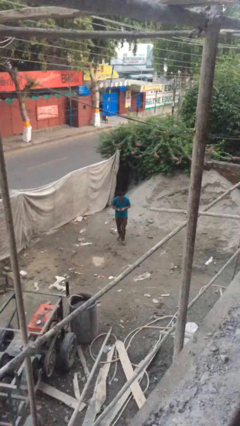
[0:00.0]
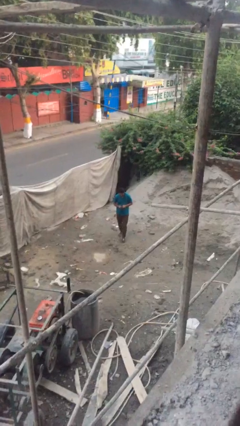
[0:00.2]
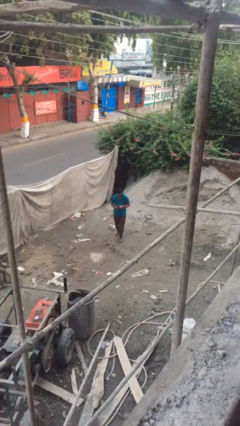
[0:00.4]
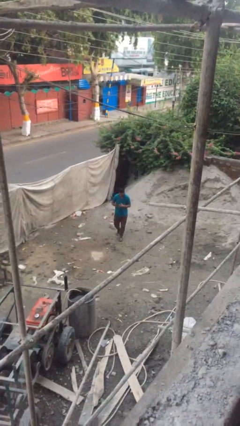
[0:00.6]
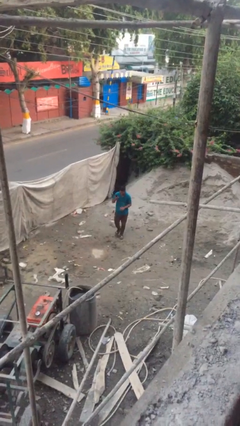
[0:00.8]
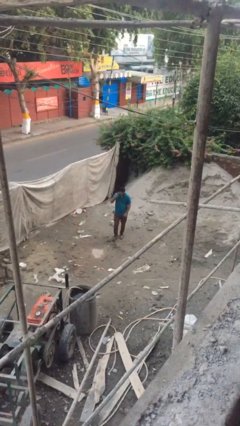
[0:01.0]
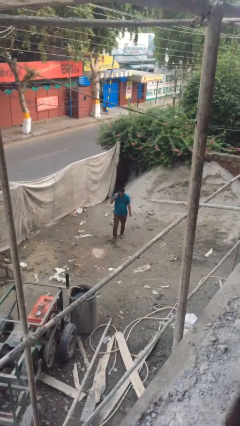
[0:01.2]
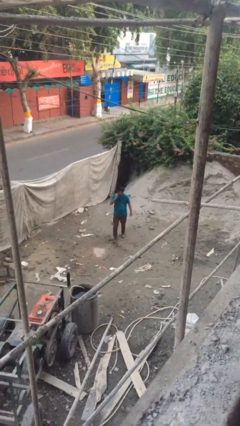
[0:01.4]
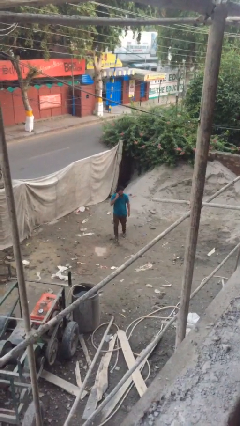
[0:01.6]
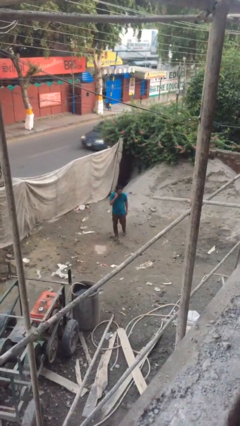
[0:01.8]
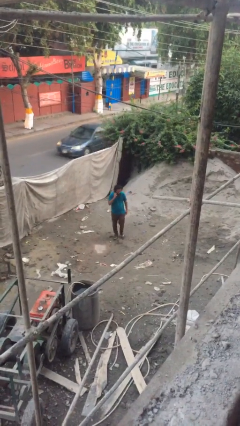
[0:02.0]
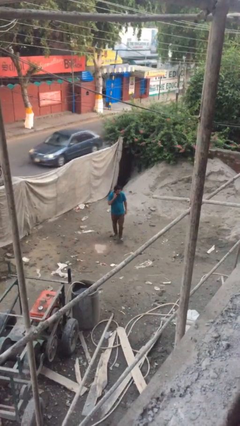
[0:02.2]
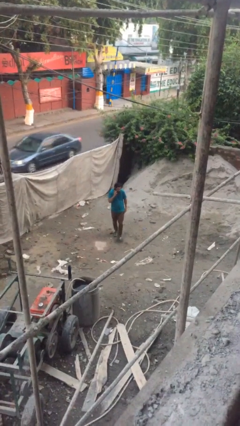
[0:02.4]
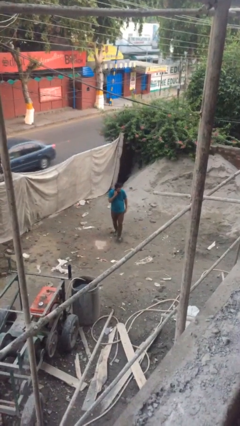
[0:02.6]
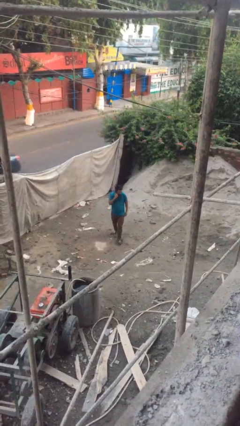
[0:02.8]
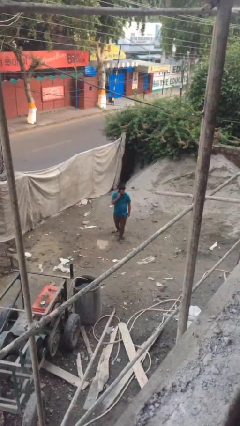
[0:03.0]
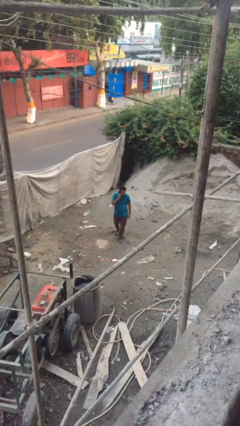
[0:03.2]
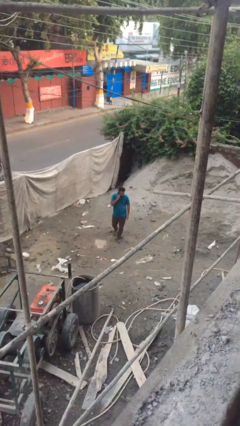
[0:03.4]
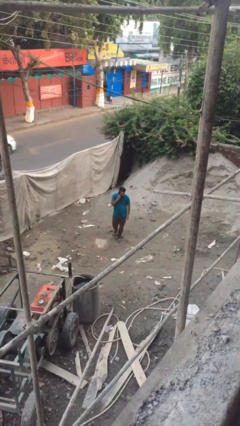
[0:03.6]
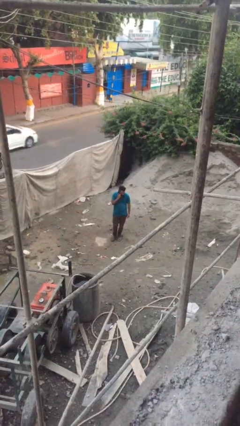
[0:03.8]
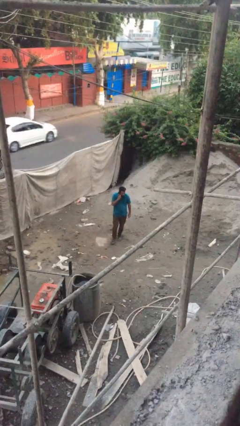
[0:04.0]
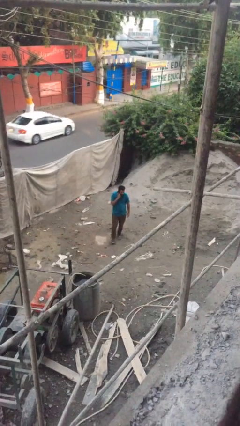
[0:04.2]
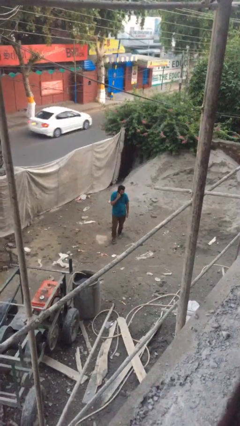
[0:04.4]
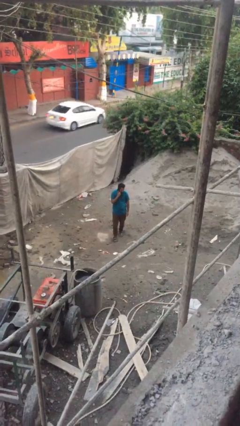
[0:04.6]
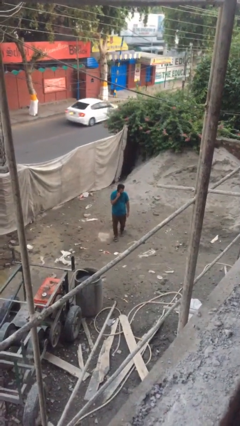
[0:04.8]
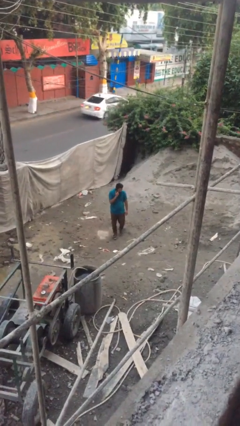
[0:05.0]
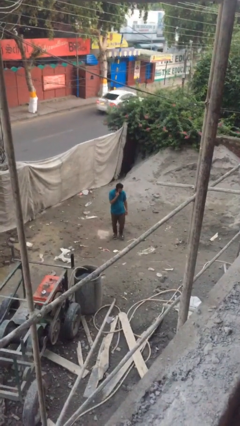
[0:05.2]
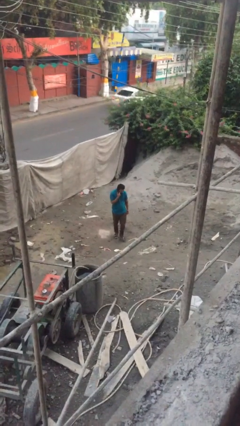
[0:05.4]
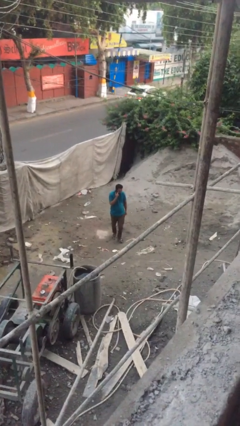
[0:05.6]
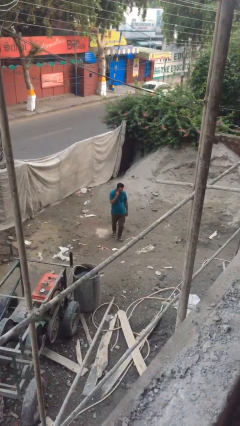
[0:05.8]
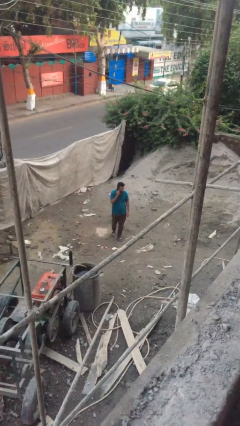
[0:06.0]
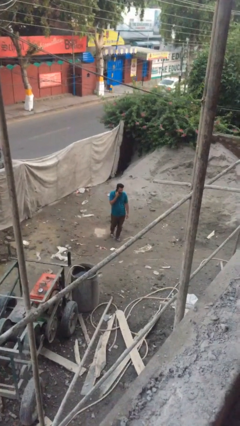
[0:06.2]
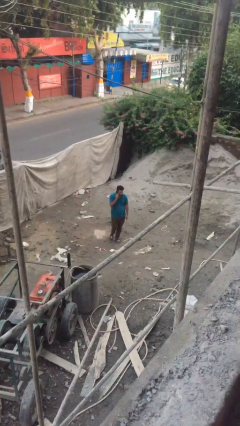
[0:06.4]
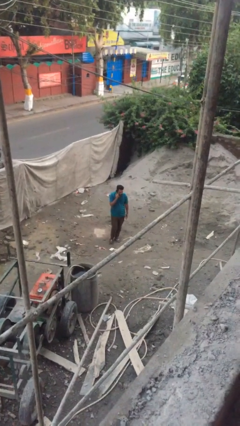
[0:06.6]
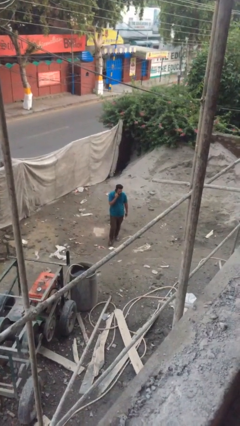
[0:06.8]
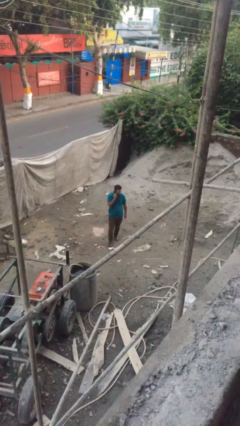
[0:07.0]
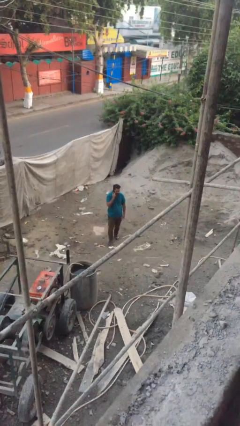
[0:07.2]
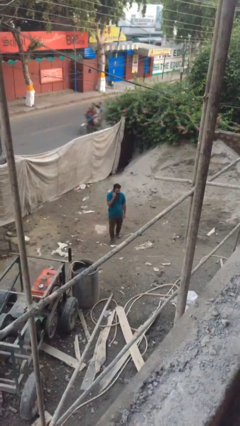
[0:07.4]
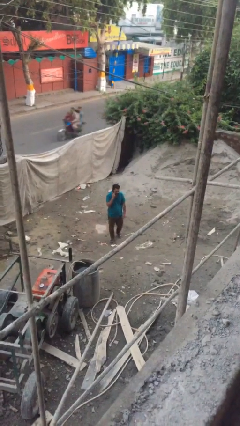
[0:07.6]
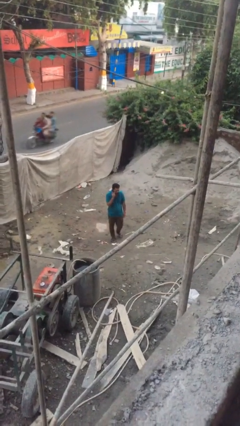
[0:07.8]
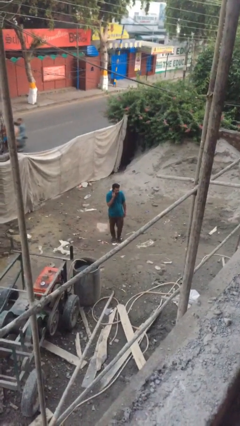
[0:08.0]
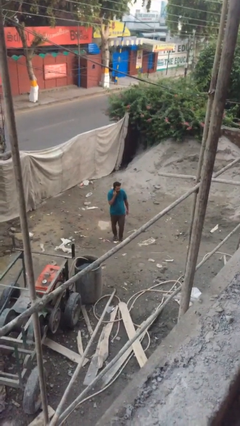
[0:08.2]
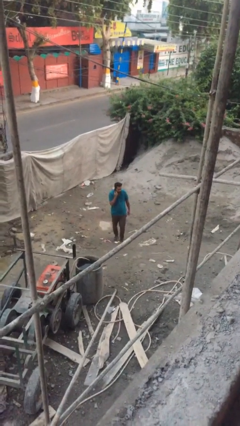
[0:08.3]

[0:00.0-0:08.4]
person talks on phone

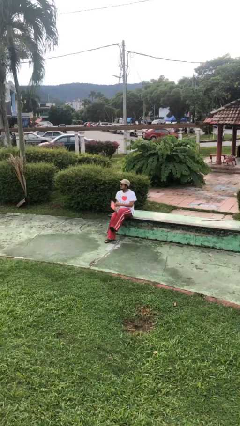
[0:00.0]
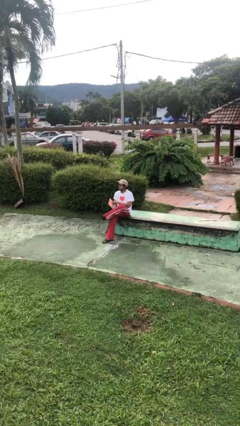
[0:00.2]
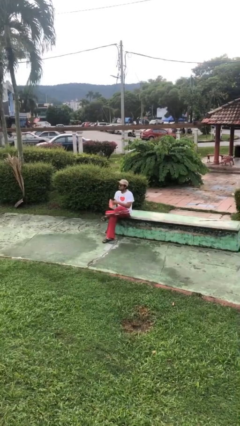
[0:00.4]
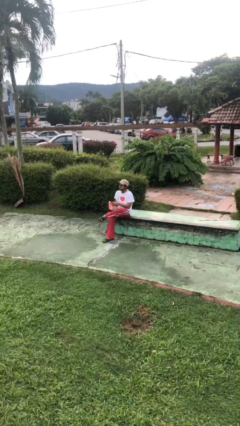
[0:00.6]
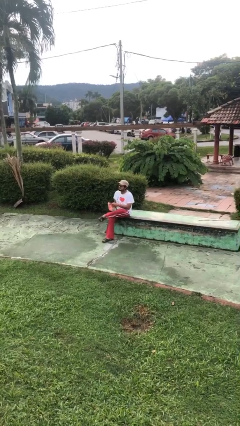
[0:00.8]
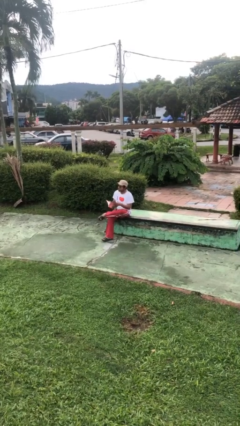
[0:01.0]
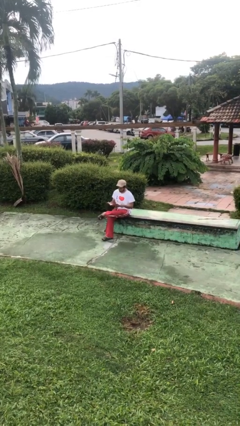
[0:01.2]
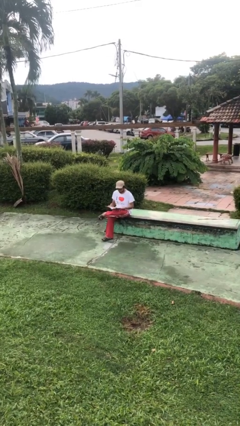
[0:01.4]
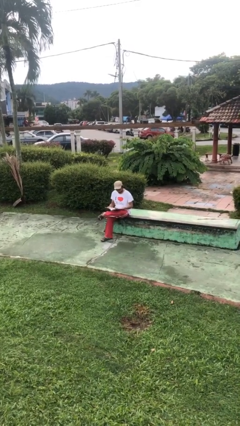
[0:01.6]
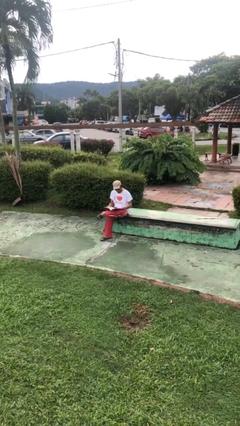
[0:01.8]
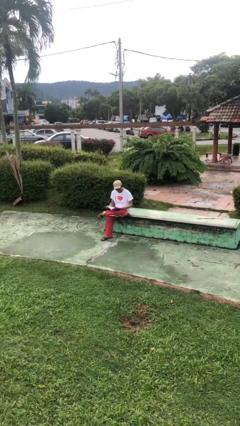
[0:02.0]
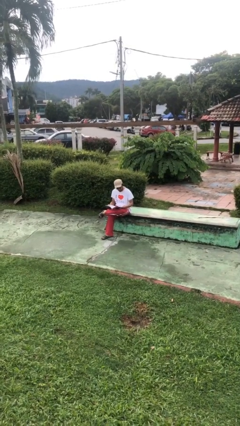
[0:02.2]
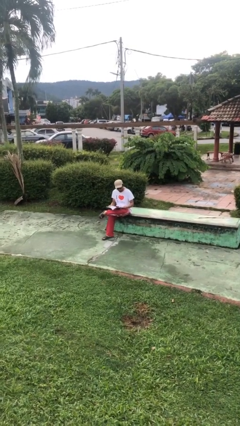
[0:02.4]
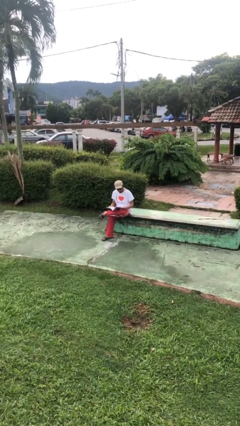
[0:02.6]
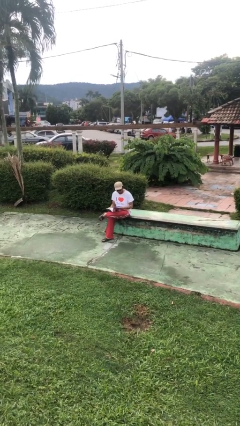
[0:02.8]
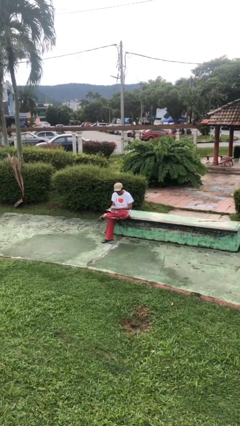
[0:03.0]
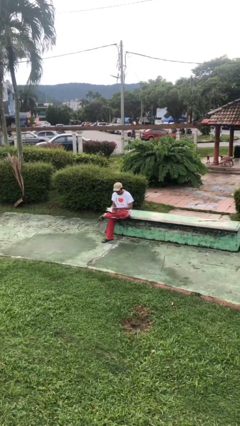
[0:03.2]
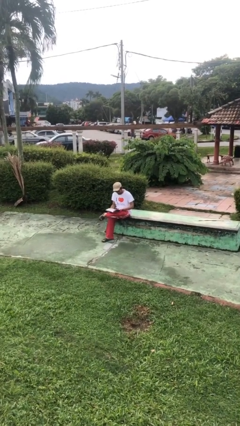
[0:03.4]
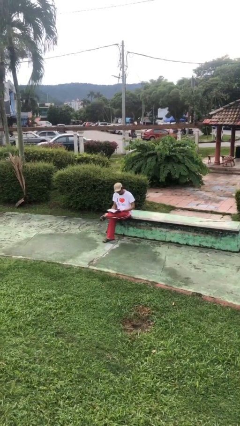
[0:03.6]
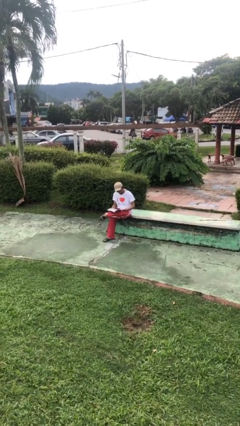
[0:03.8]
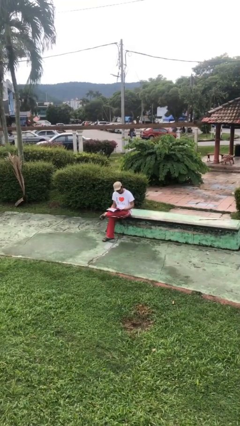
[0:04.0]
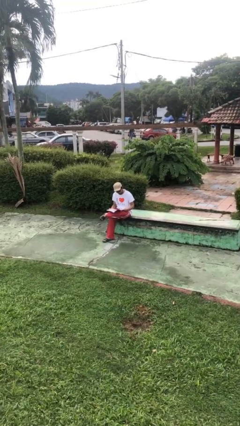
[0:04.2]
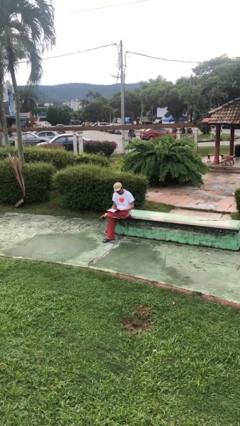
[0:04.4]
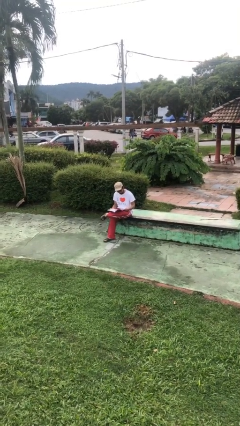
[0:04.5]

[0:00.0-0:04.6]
person reads document

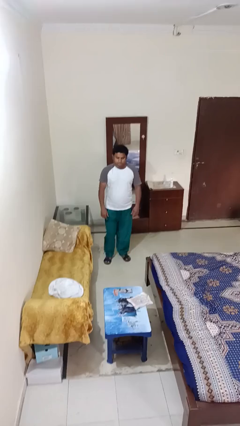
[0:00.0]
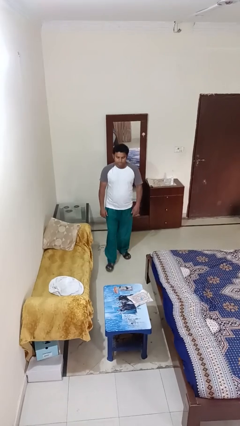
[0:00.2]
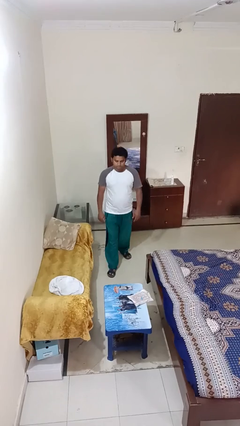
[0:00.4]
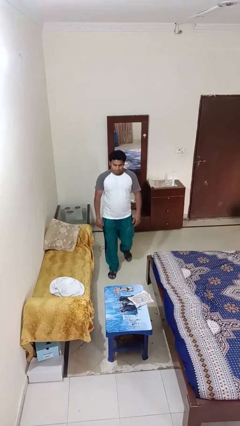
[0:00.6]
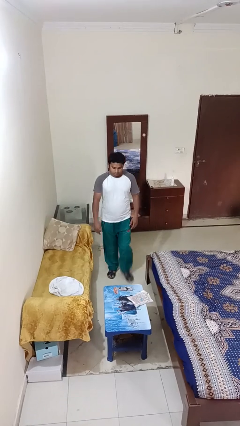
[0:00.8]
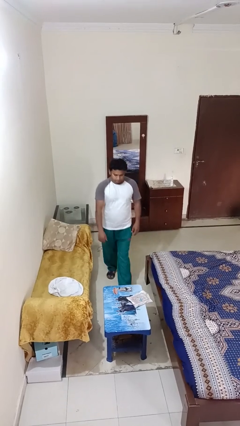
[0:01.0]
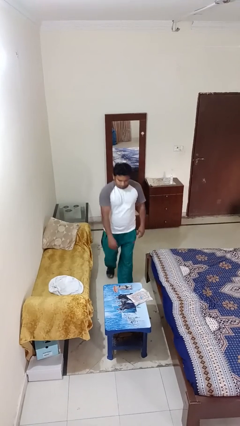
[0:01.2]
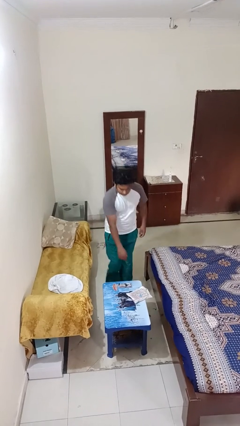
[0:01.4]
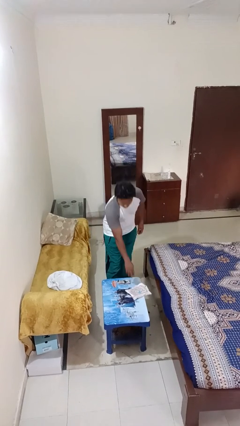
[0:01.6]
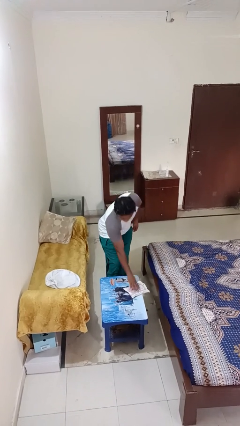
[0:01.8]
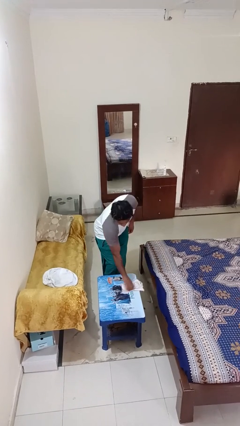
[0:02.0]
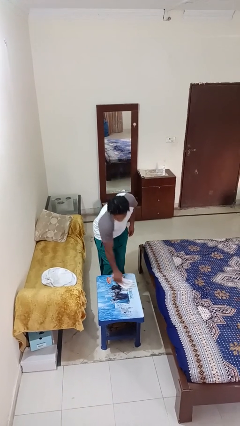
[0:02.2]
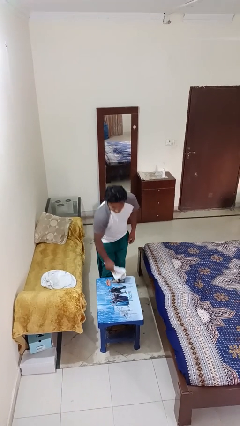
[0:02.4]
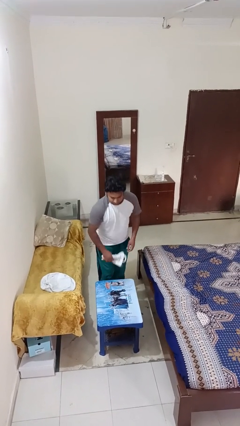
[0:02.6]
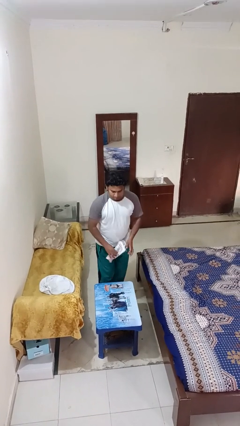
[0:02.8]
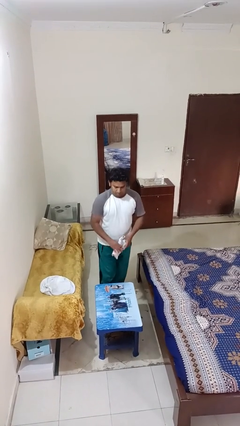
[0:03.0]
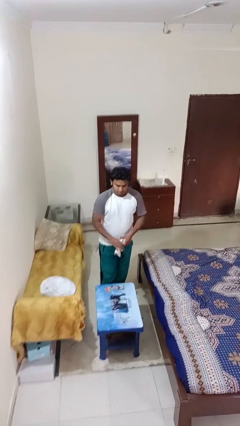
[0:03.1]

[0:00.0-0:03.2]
person picks up object from table

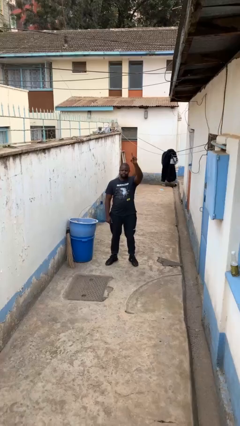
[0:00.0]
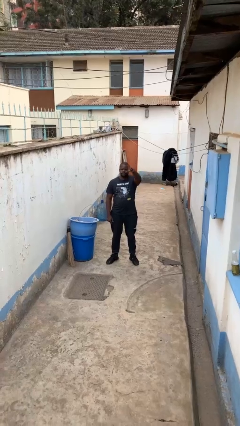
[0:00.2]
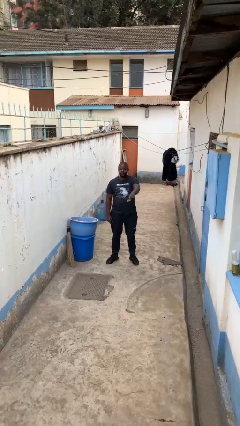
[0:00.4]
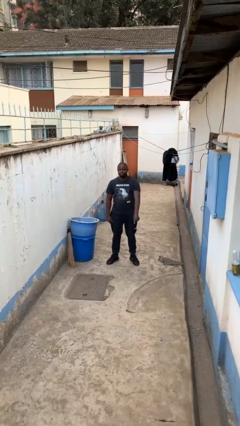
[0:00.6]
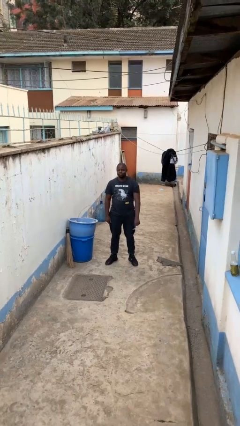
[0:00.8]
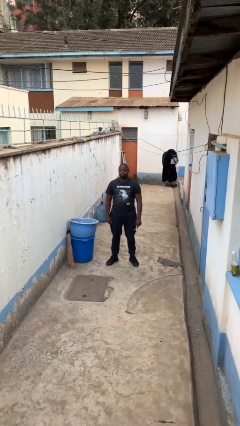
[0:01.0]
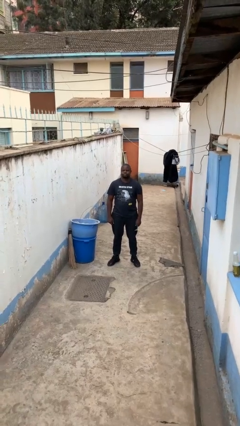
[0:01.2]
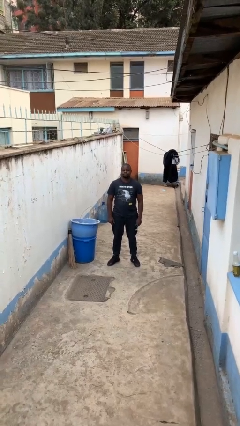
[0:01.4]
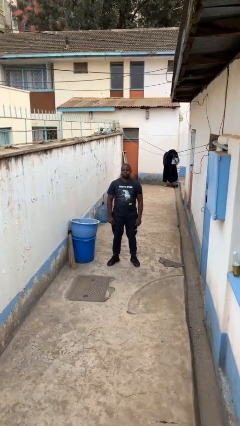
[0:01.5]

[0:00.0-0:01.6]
person gestures swipe down

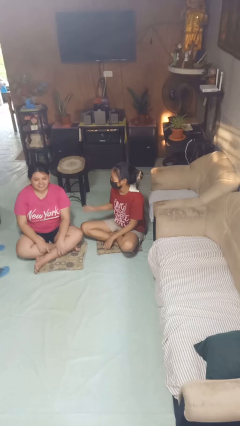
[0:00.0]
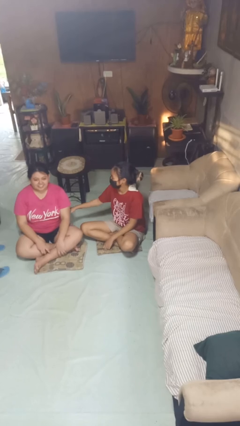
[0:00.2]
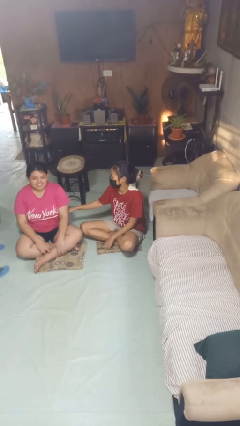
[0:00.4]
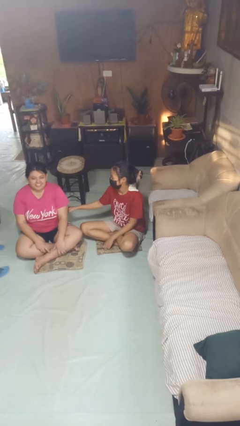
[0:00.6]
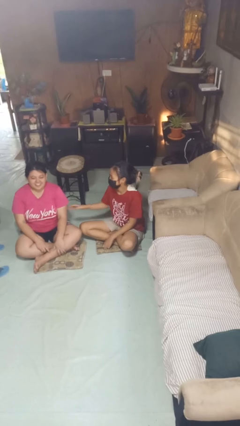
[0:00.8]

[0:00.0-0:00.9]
person tickles person
